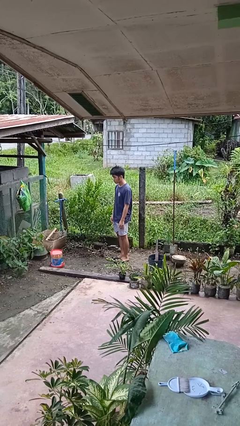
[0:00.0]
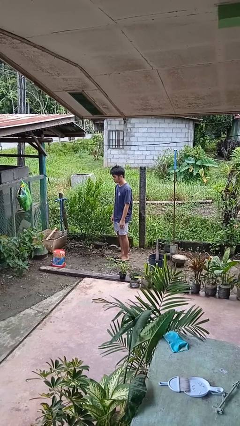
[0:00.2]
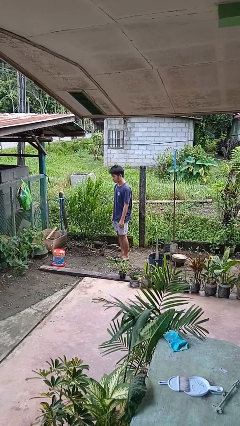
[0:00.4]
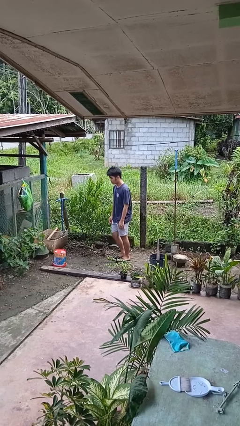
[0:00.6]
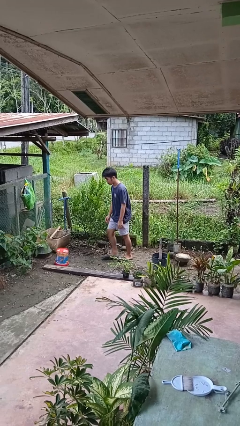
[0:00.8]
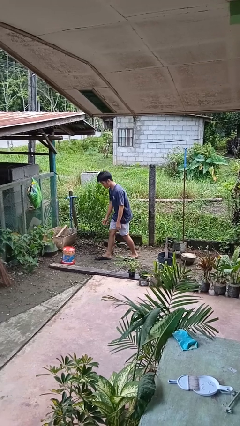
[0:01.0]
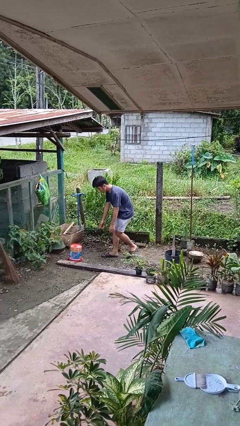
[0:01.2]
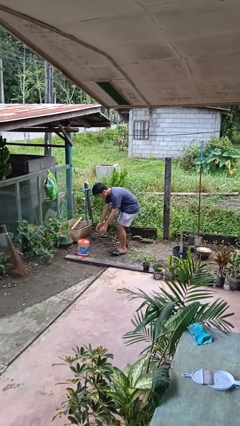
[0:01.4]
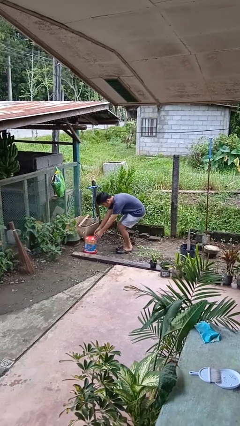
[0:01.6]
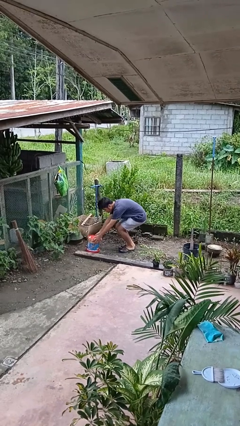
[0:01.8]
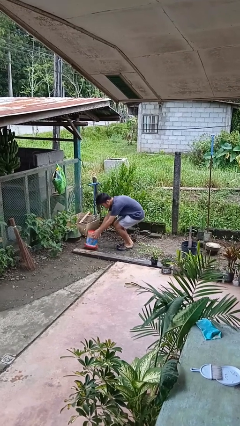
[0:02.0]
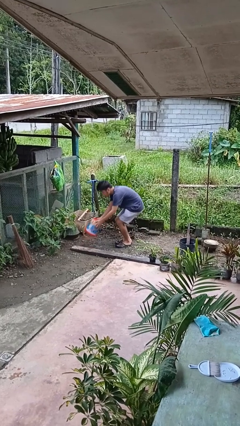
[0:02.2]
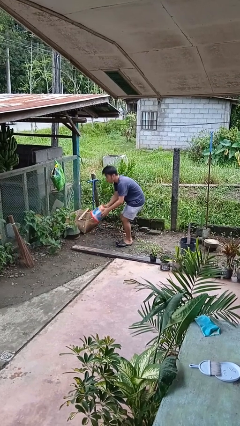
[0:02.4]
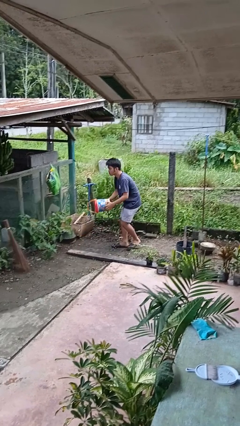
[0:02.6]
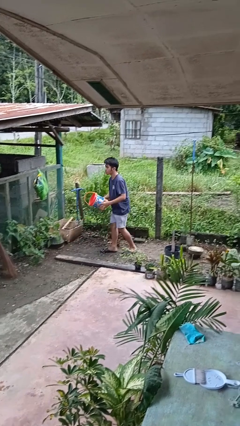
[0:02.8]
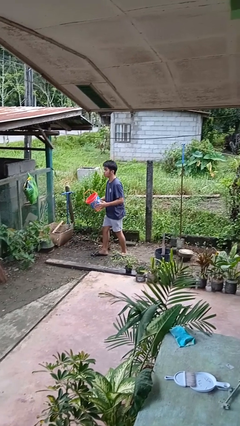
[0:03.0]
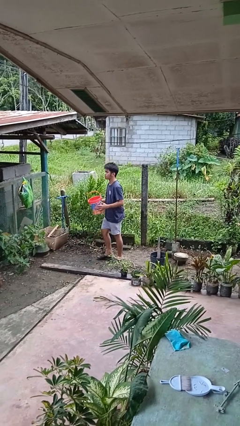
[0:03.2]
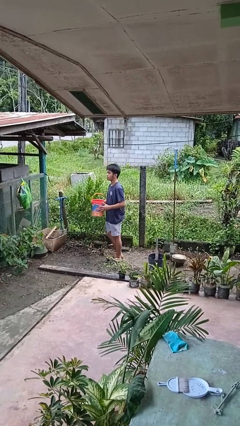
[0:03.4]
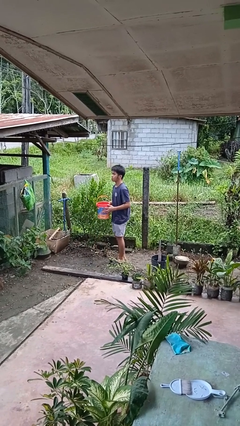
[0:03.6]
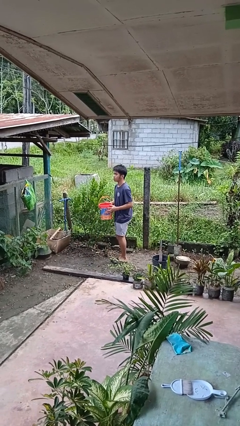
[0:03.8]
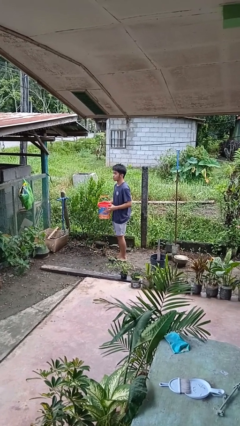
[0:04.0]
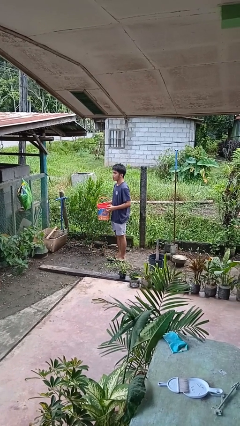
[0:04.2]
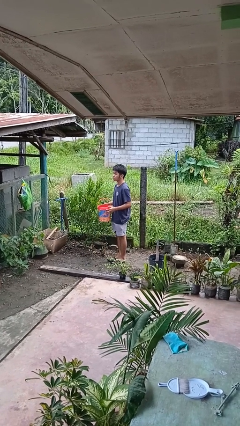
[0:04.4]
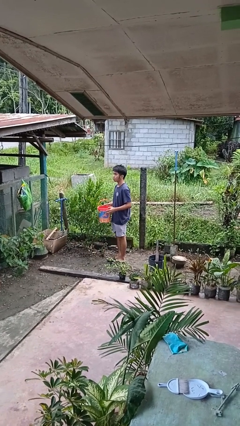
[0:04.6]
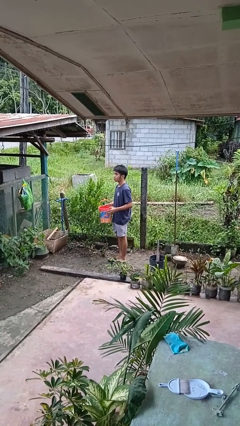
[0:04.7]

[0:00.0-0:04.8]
person picks up object from floor

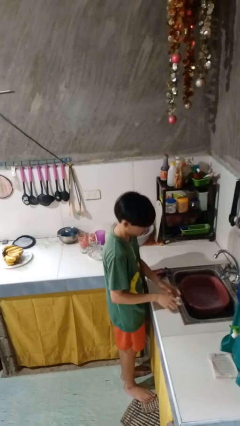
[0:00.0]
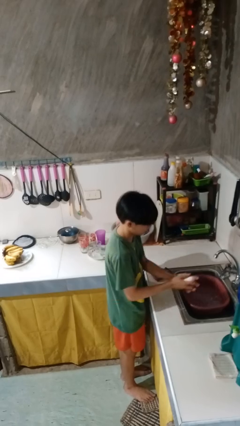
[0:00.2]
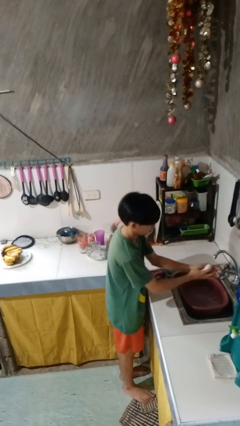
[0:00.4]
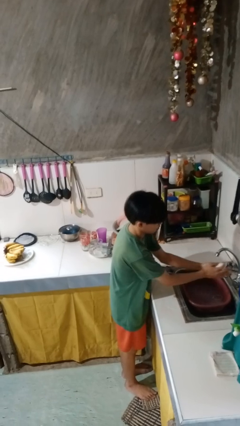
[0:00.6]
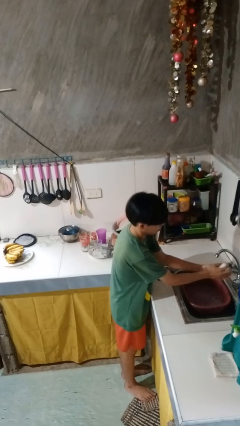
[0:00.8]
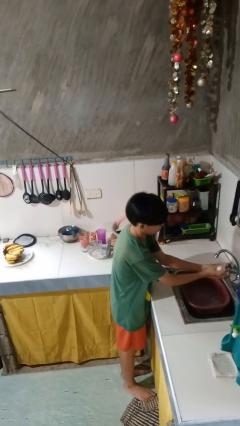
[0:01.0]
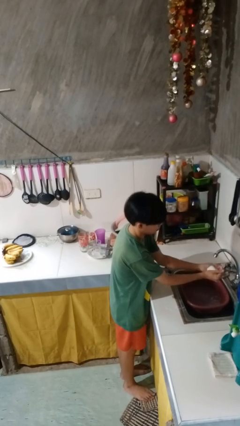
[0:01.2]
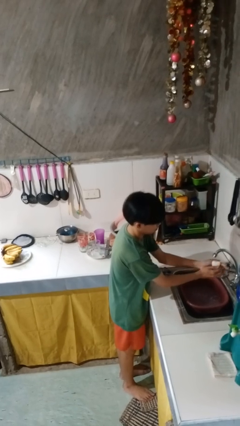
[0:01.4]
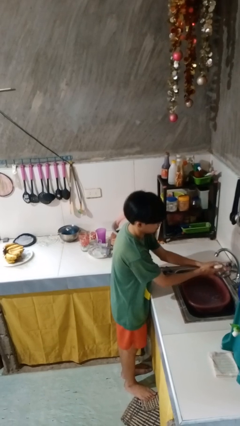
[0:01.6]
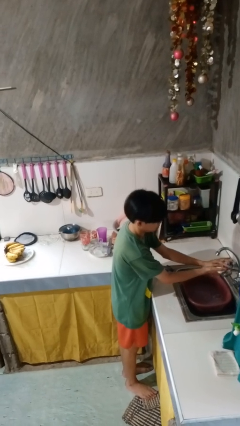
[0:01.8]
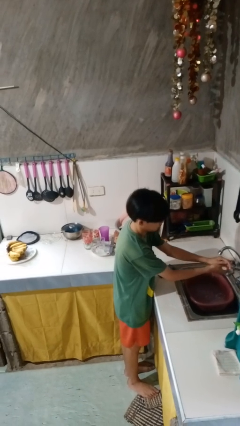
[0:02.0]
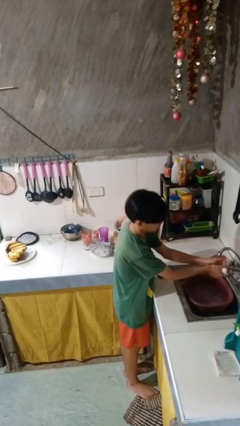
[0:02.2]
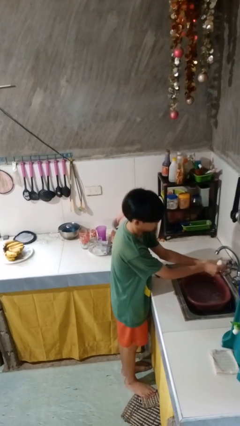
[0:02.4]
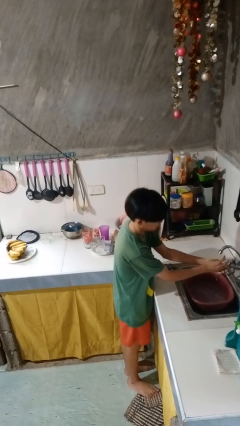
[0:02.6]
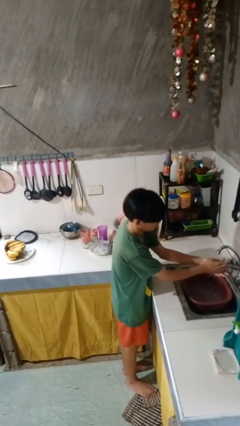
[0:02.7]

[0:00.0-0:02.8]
person washes hands

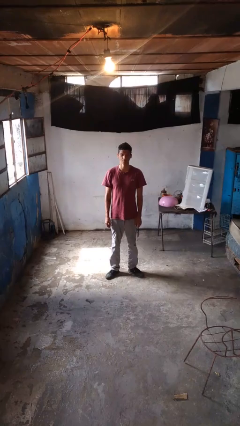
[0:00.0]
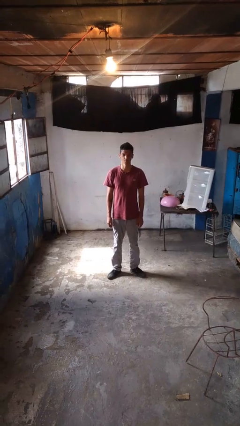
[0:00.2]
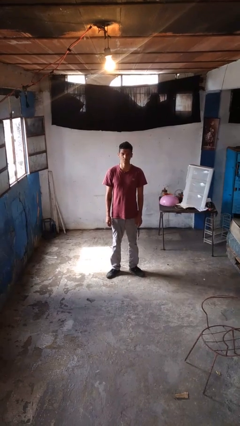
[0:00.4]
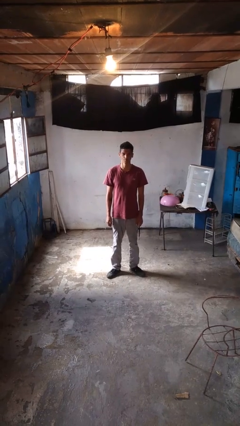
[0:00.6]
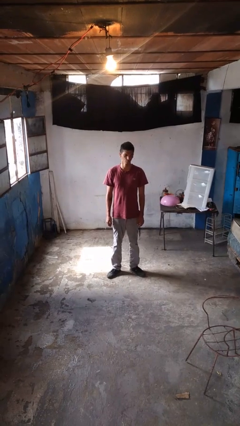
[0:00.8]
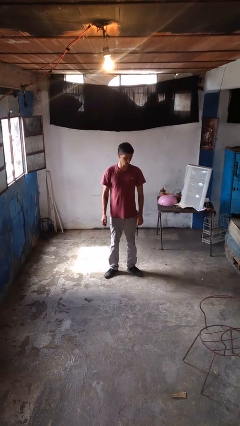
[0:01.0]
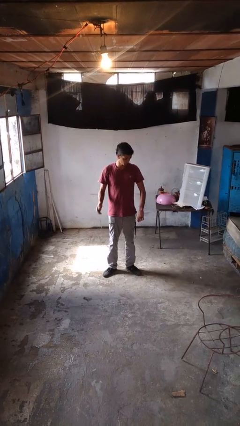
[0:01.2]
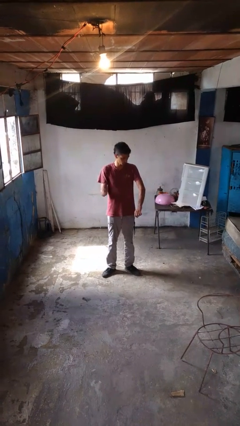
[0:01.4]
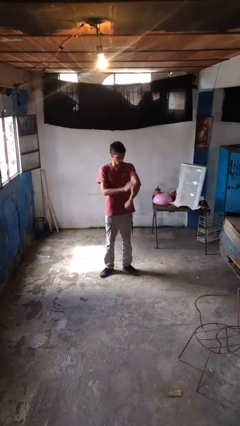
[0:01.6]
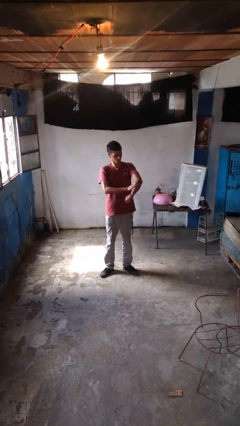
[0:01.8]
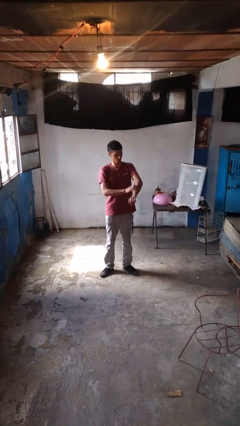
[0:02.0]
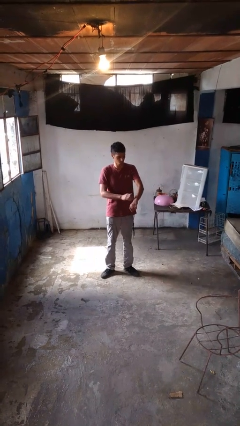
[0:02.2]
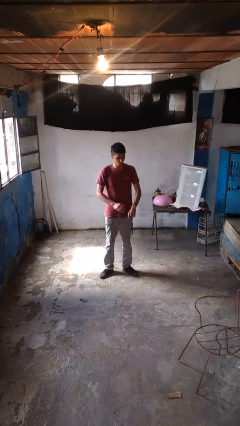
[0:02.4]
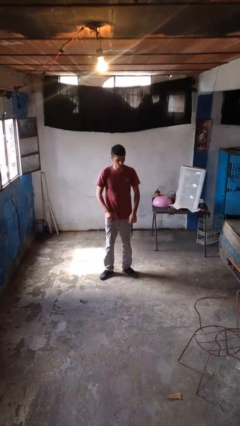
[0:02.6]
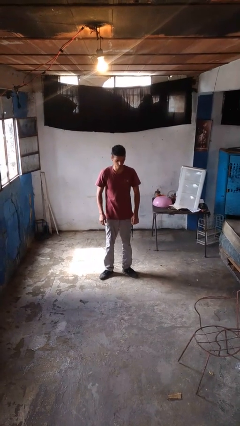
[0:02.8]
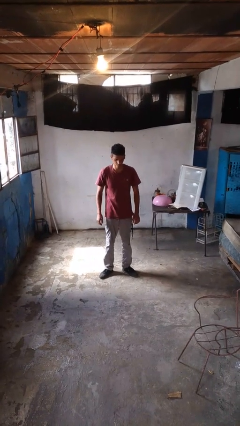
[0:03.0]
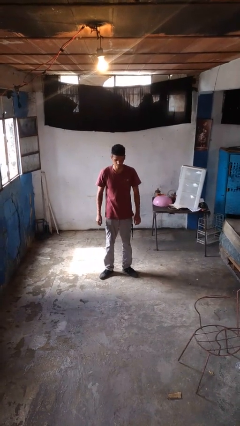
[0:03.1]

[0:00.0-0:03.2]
person swats bug

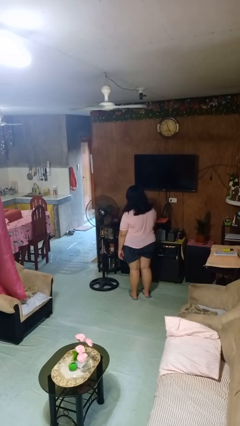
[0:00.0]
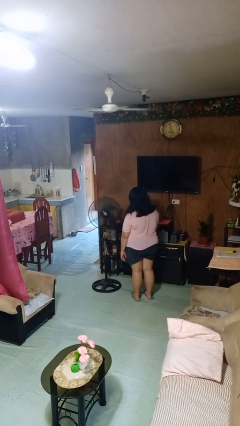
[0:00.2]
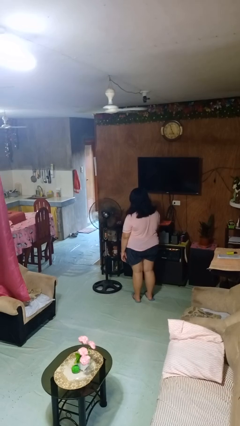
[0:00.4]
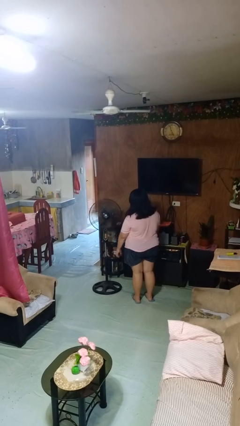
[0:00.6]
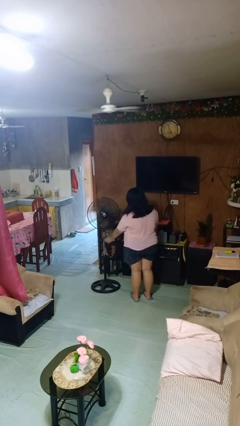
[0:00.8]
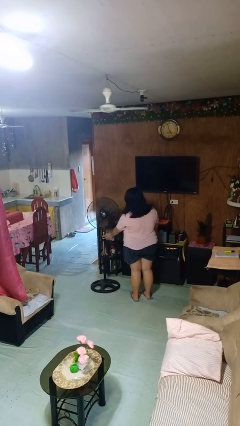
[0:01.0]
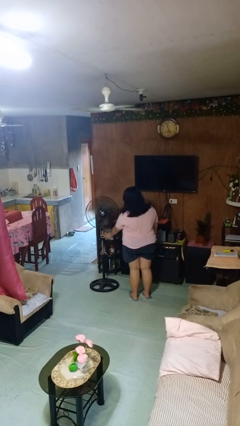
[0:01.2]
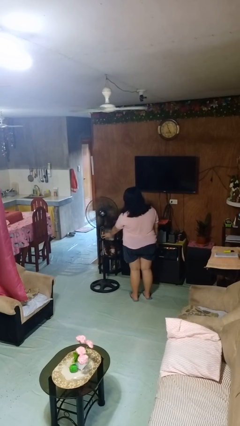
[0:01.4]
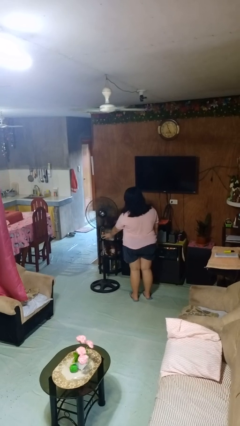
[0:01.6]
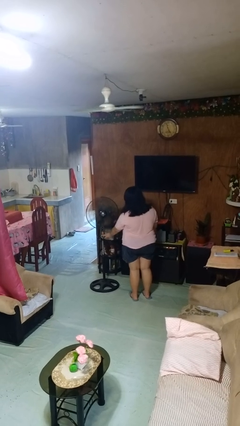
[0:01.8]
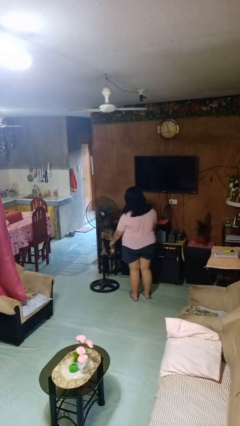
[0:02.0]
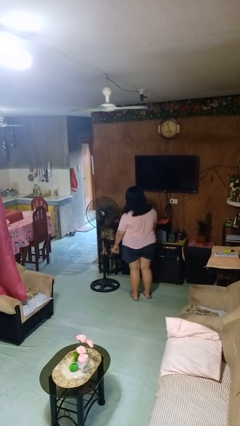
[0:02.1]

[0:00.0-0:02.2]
person turns on fan

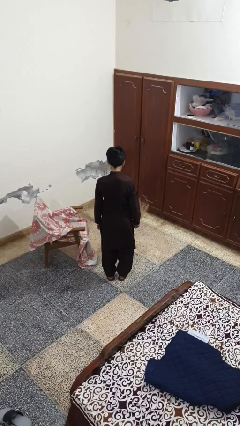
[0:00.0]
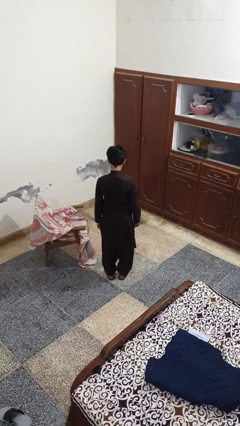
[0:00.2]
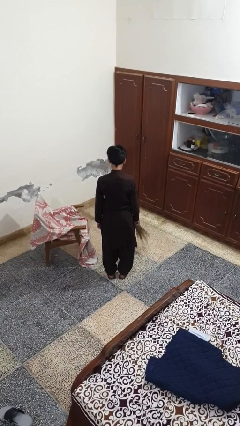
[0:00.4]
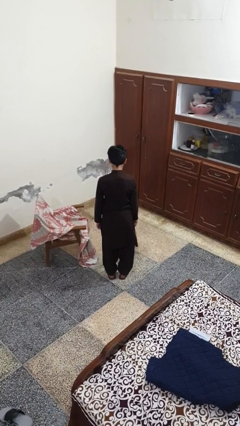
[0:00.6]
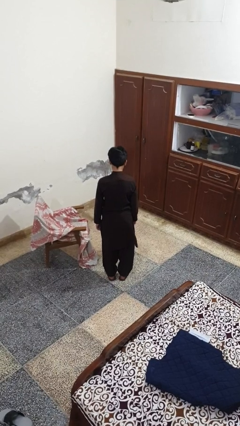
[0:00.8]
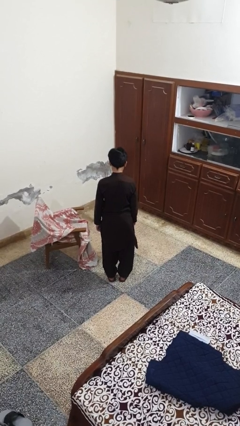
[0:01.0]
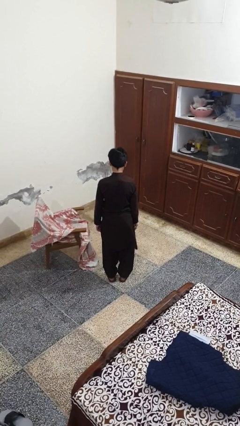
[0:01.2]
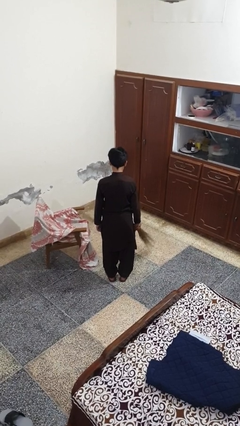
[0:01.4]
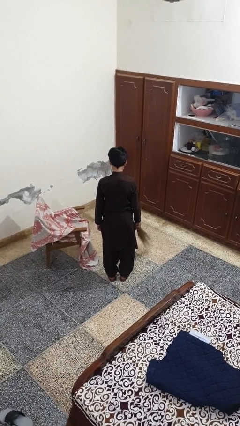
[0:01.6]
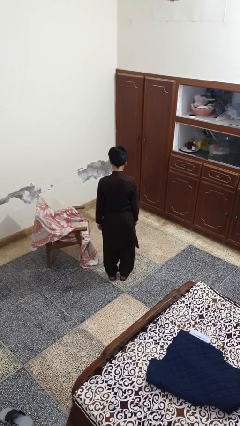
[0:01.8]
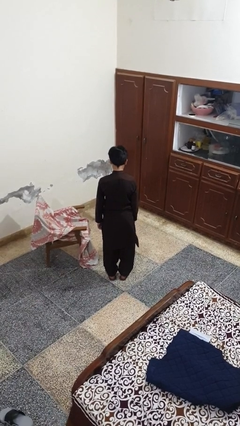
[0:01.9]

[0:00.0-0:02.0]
person sweeps floor

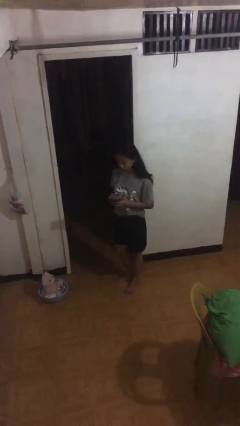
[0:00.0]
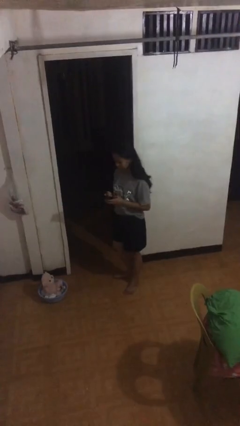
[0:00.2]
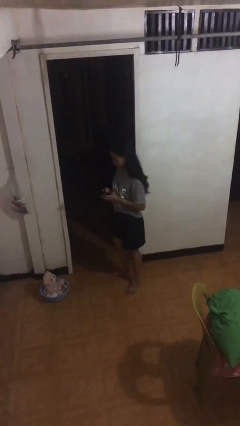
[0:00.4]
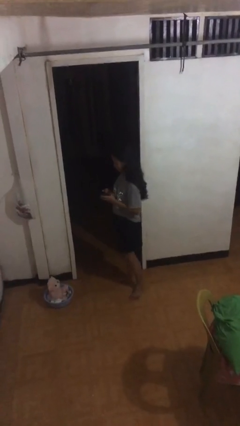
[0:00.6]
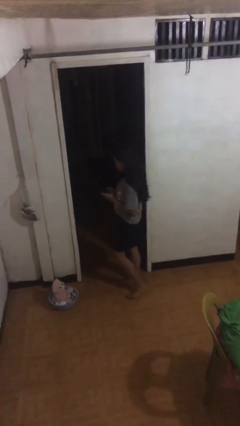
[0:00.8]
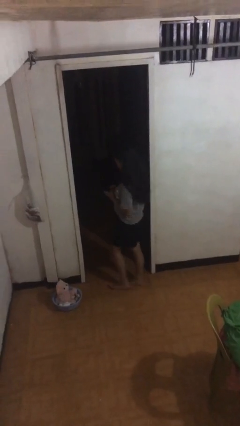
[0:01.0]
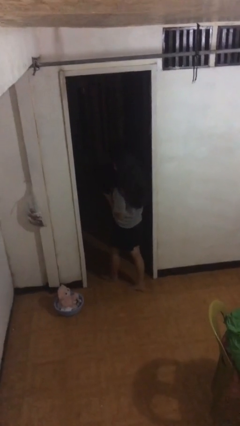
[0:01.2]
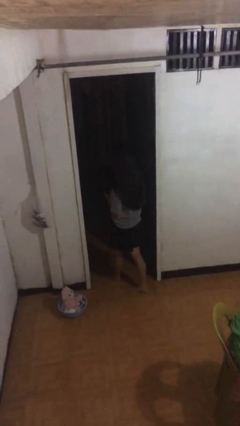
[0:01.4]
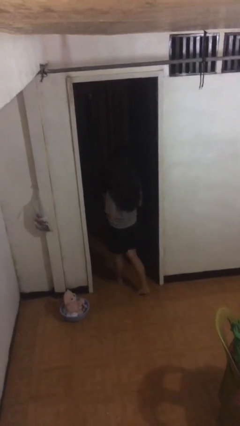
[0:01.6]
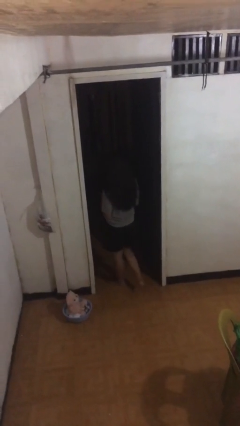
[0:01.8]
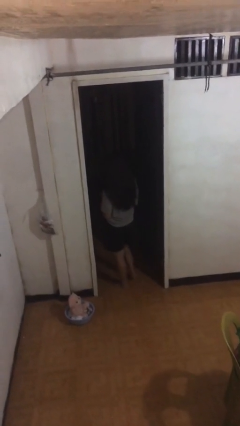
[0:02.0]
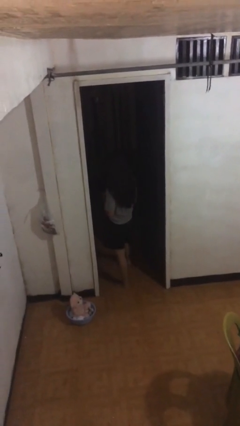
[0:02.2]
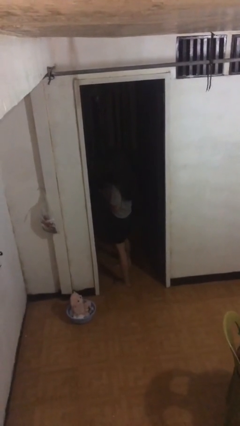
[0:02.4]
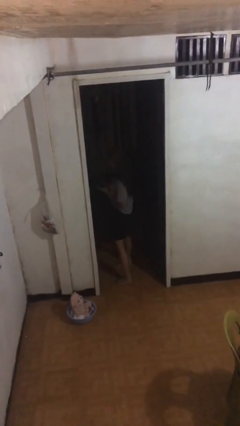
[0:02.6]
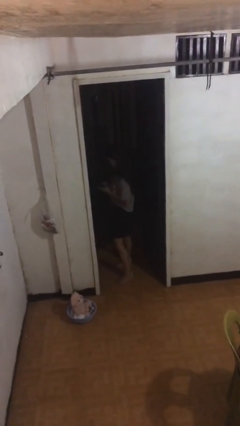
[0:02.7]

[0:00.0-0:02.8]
person exits scene through structure
